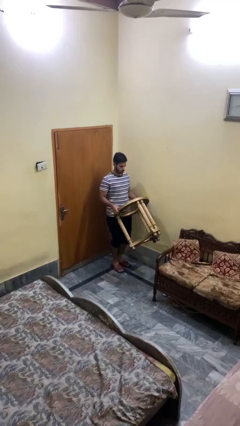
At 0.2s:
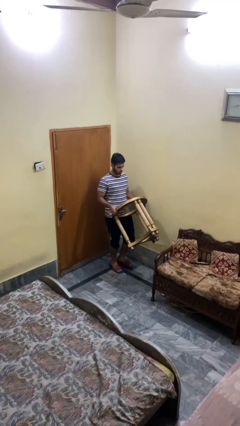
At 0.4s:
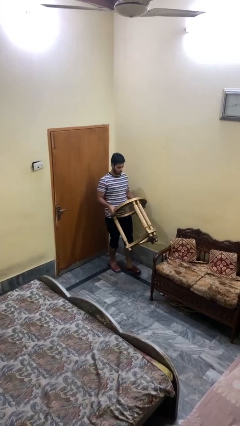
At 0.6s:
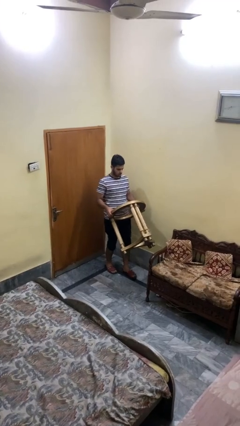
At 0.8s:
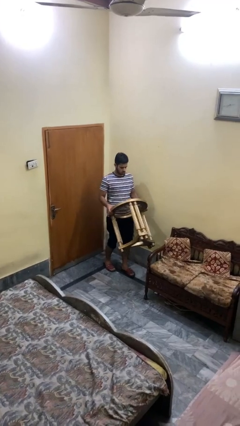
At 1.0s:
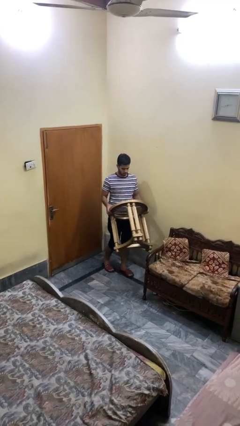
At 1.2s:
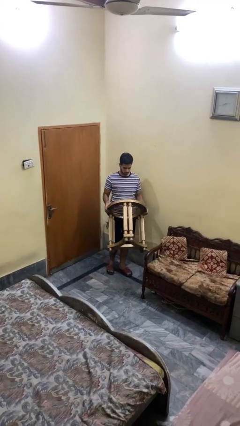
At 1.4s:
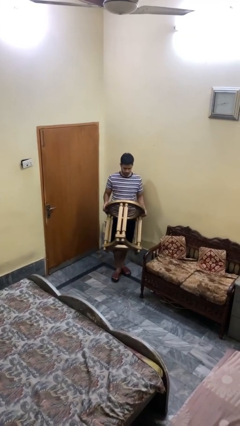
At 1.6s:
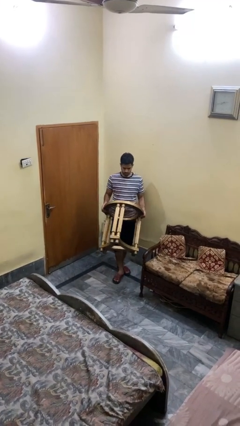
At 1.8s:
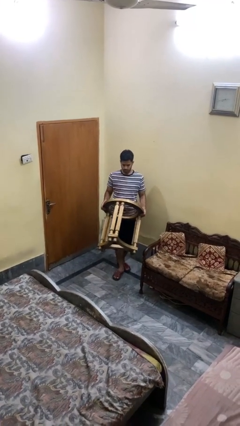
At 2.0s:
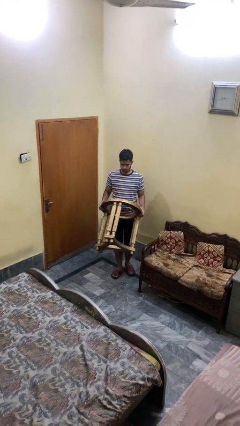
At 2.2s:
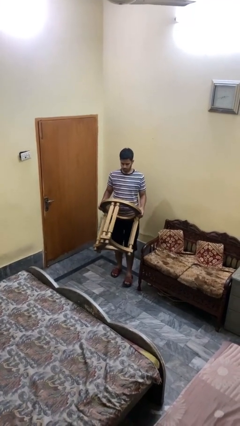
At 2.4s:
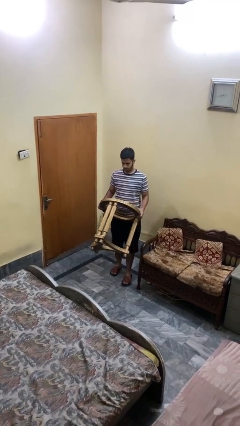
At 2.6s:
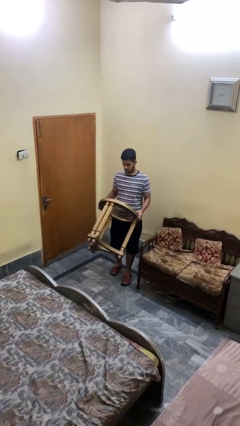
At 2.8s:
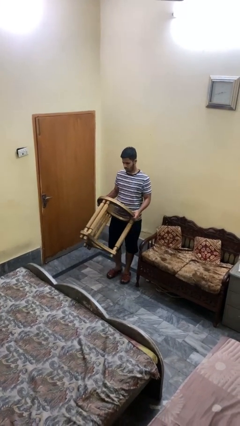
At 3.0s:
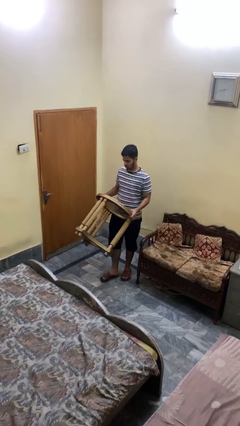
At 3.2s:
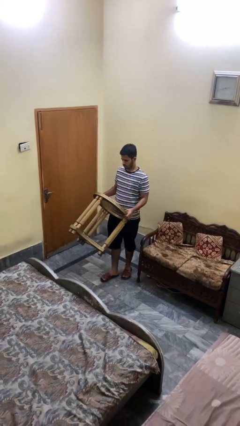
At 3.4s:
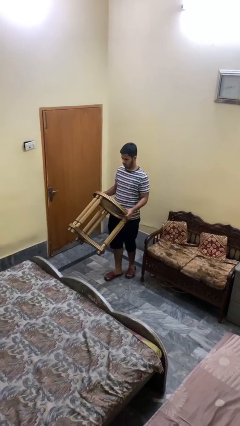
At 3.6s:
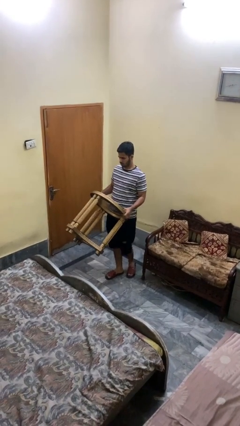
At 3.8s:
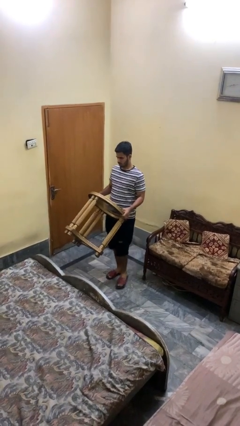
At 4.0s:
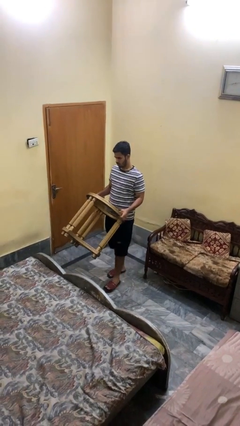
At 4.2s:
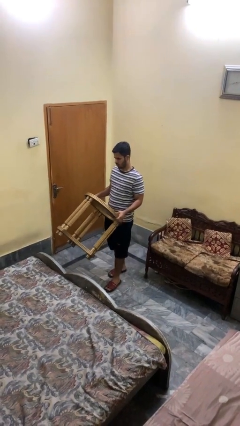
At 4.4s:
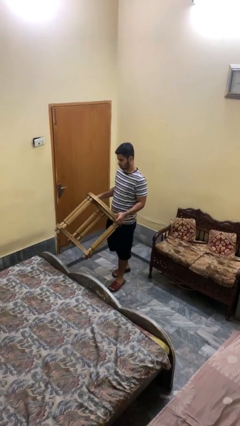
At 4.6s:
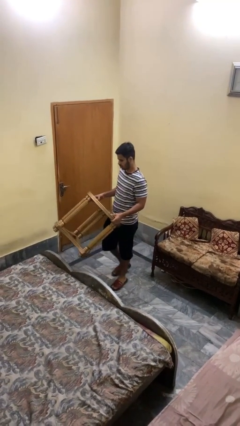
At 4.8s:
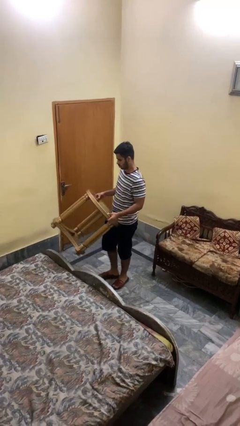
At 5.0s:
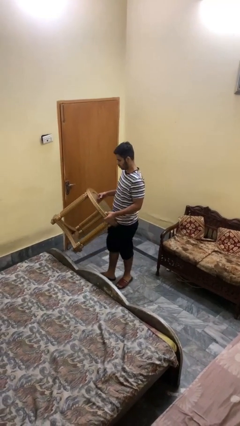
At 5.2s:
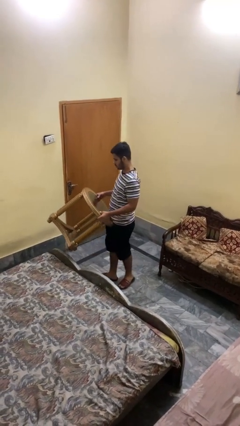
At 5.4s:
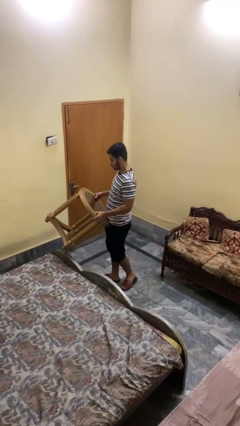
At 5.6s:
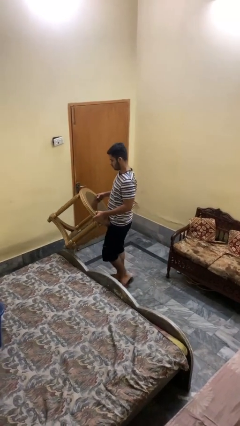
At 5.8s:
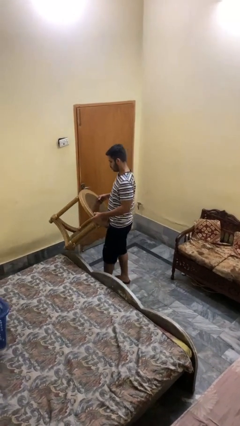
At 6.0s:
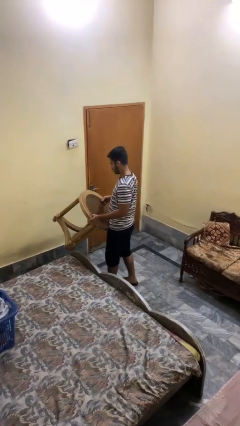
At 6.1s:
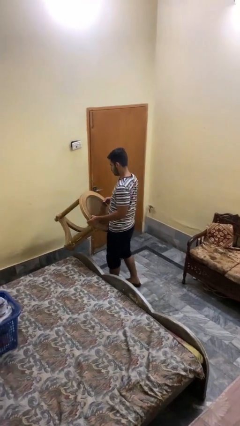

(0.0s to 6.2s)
person carries furniture

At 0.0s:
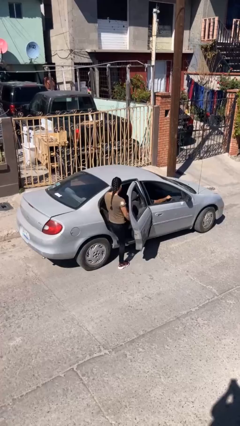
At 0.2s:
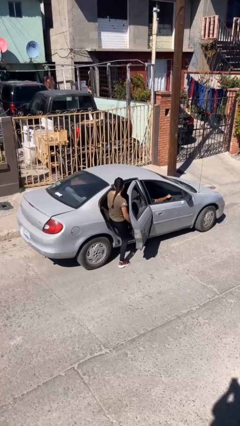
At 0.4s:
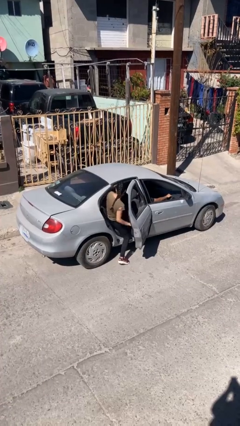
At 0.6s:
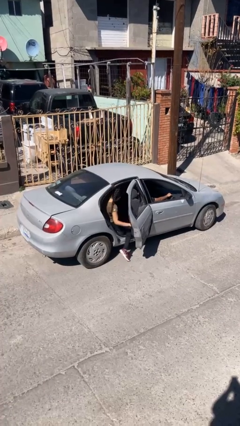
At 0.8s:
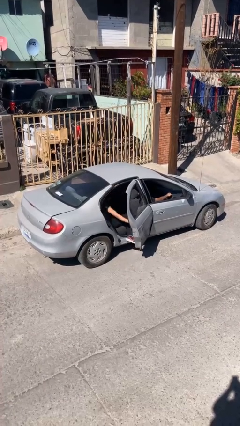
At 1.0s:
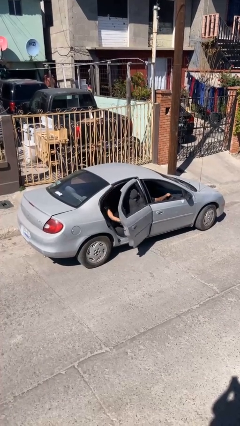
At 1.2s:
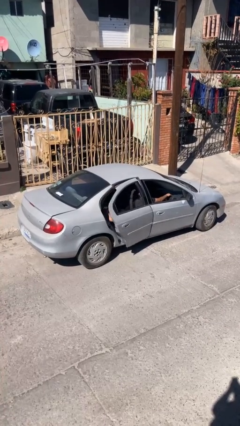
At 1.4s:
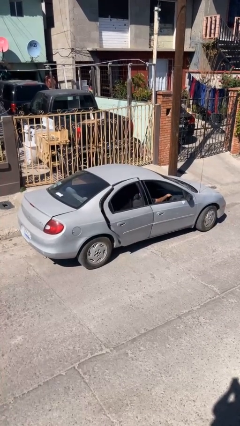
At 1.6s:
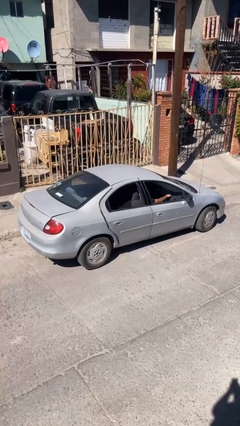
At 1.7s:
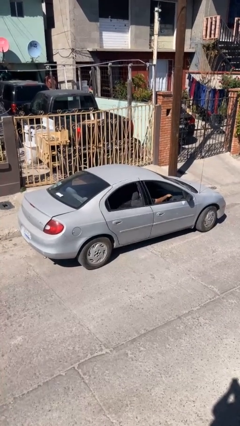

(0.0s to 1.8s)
car picks up person

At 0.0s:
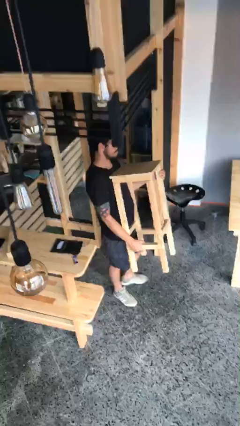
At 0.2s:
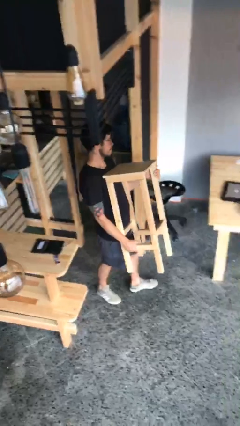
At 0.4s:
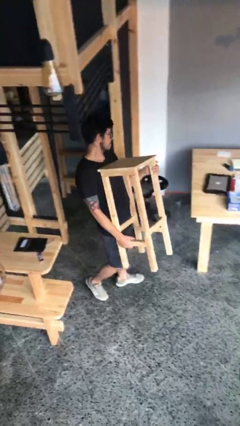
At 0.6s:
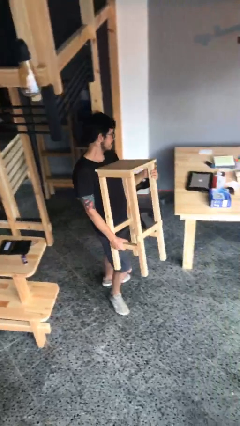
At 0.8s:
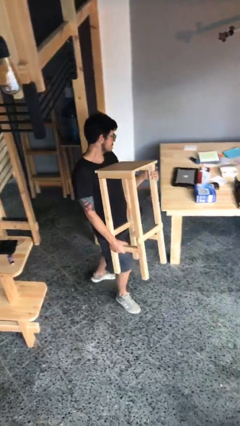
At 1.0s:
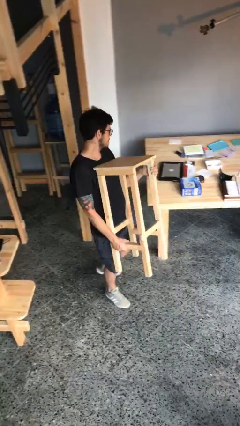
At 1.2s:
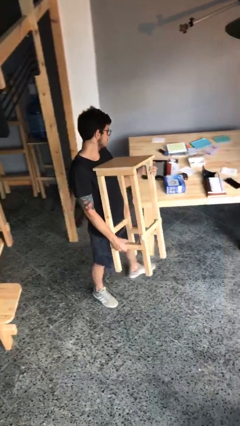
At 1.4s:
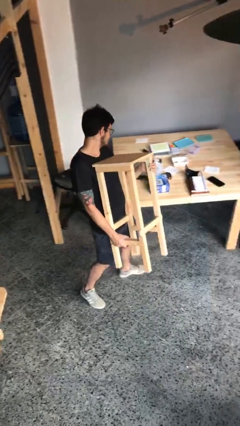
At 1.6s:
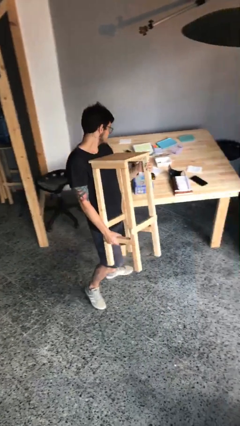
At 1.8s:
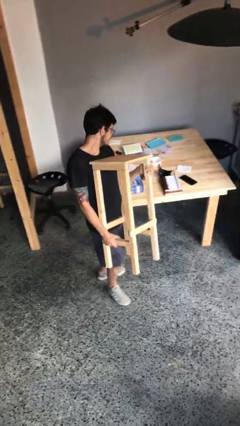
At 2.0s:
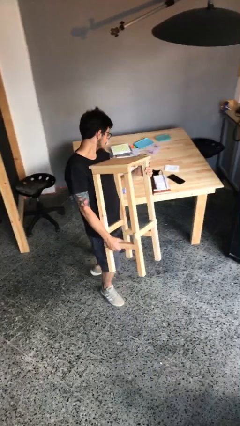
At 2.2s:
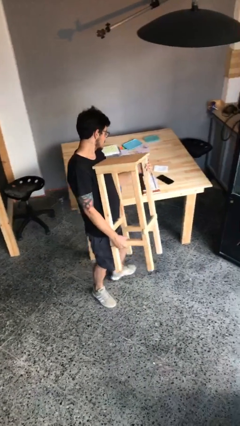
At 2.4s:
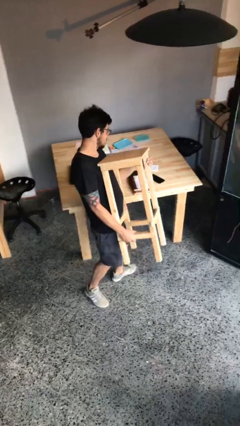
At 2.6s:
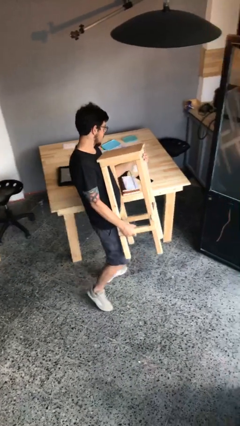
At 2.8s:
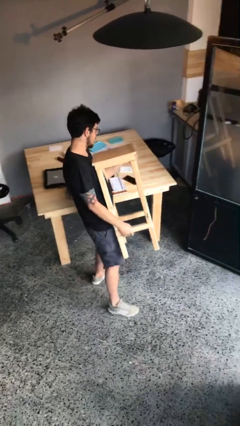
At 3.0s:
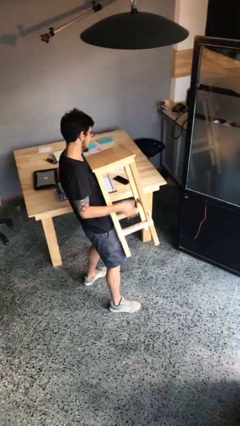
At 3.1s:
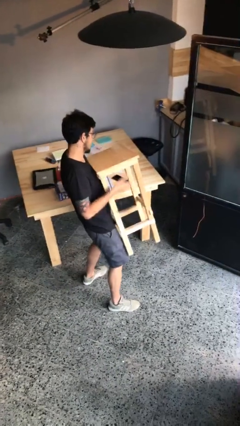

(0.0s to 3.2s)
person carries heavy object

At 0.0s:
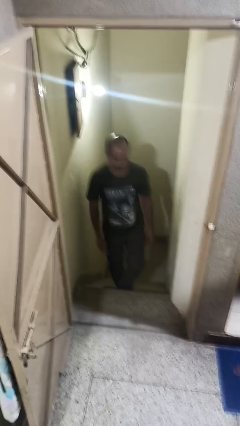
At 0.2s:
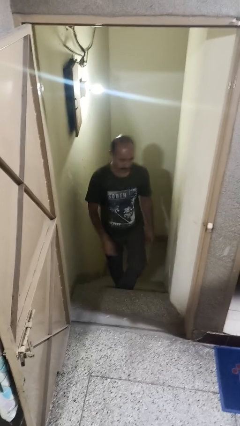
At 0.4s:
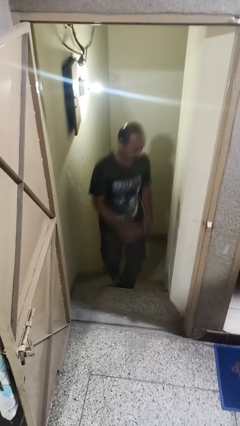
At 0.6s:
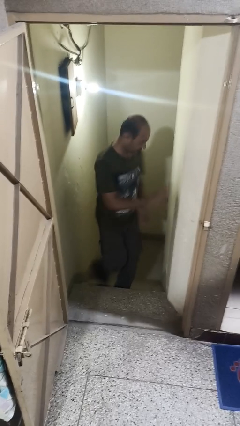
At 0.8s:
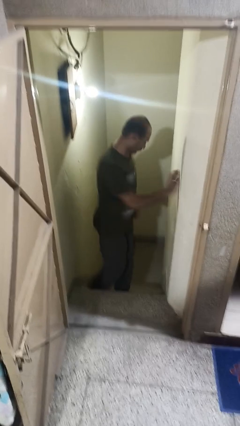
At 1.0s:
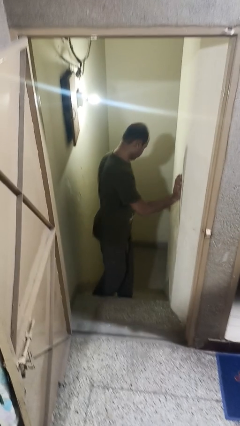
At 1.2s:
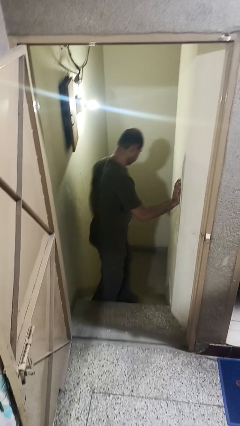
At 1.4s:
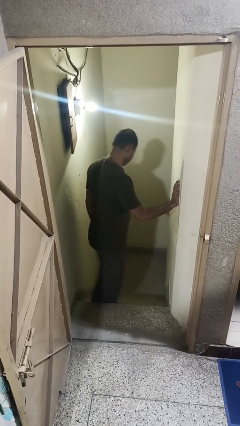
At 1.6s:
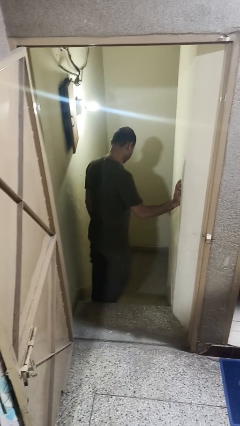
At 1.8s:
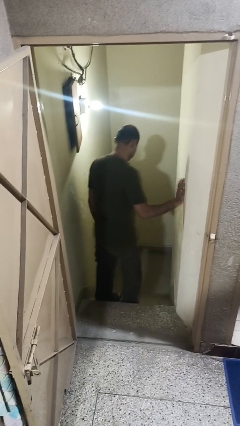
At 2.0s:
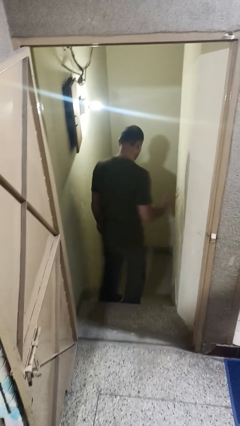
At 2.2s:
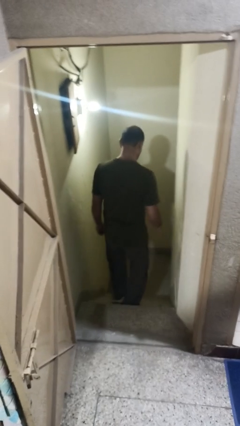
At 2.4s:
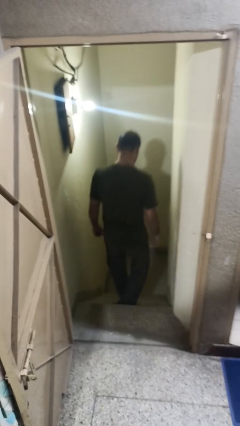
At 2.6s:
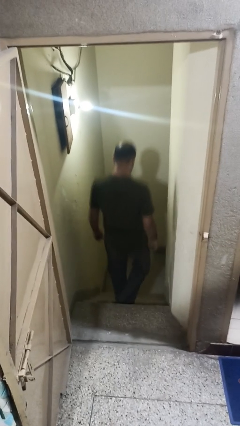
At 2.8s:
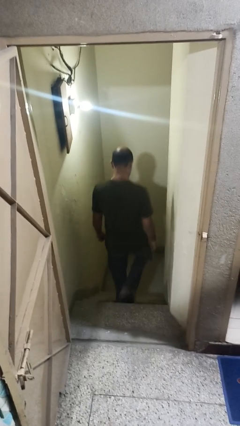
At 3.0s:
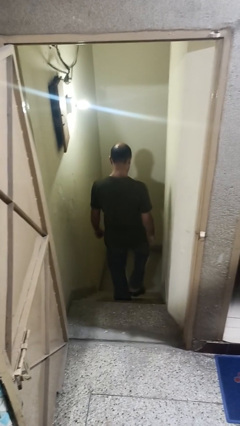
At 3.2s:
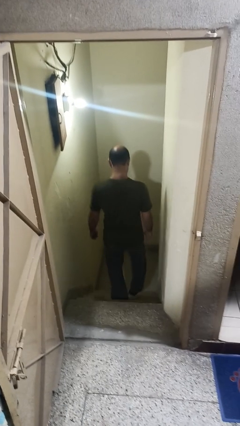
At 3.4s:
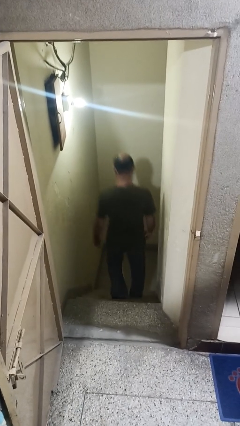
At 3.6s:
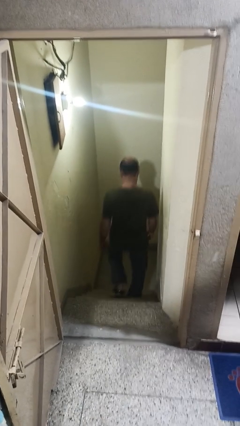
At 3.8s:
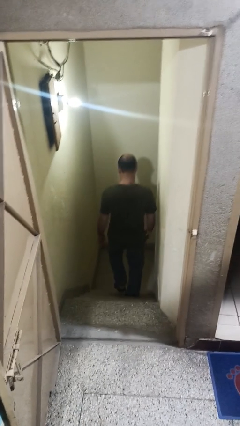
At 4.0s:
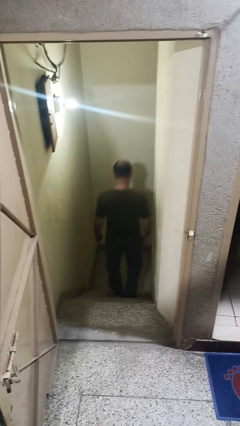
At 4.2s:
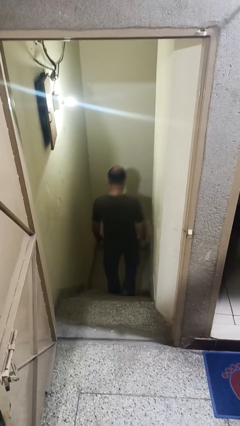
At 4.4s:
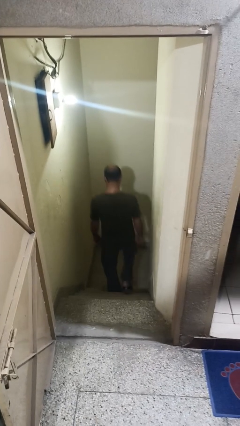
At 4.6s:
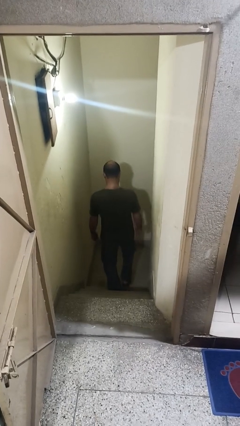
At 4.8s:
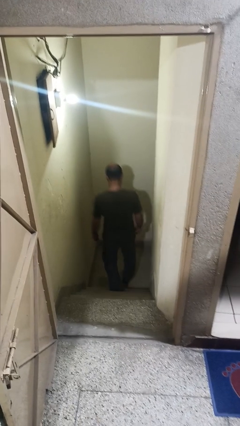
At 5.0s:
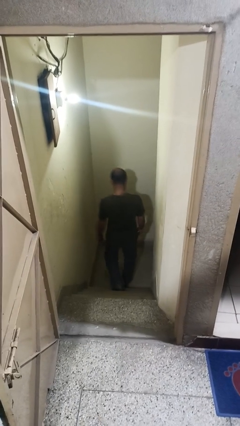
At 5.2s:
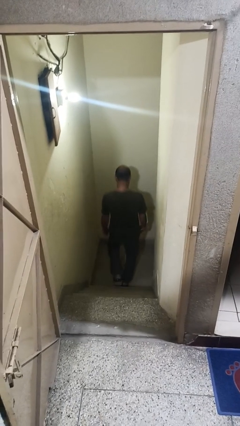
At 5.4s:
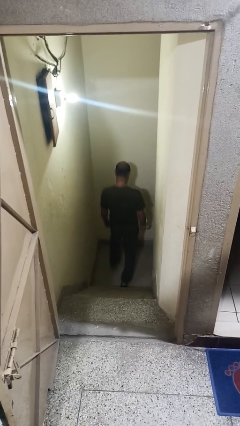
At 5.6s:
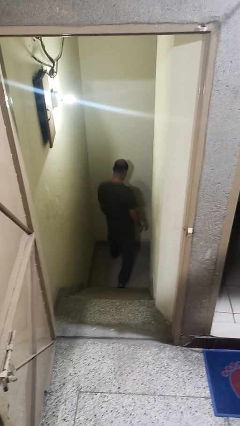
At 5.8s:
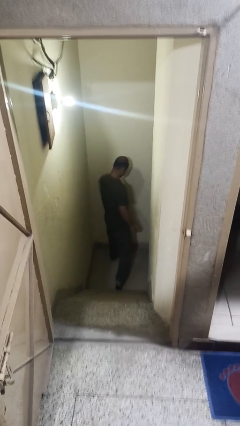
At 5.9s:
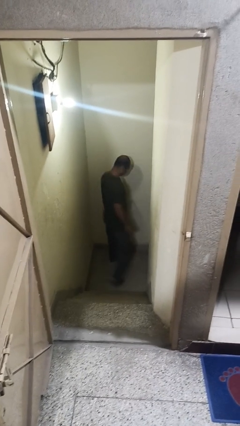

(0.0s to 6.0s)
person climbs down stairs

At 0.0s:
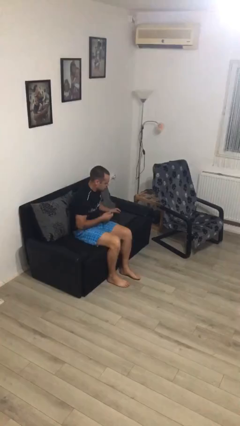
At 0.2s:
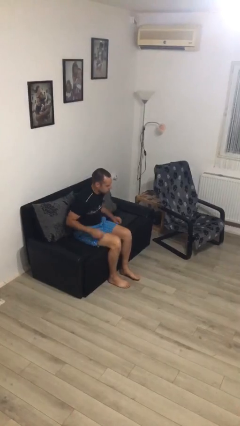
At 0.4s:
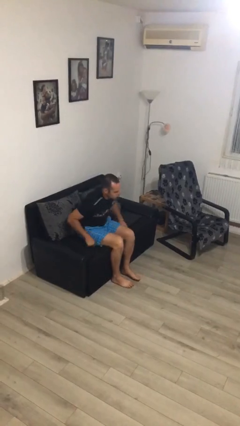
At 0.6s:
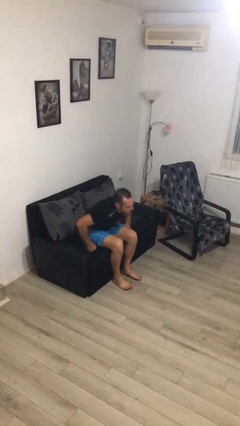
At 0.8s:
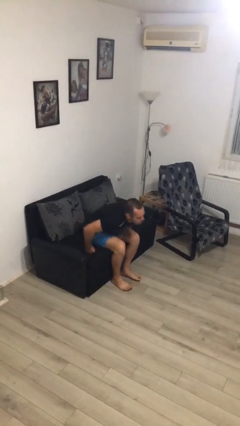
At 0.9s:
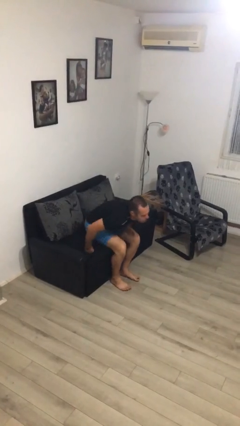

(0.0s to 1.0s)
person stands up
